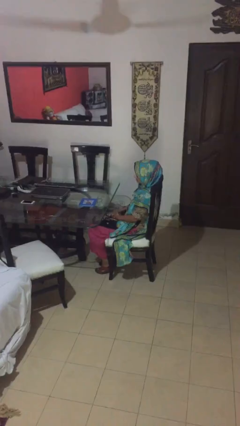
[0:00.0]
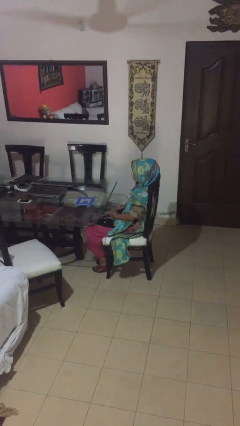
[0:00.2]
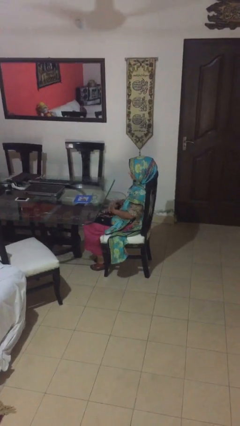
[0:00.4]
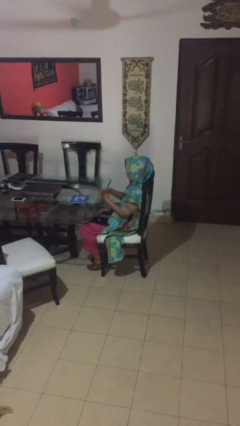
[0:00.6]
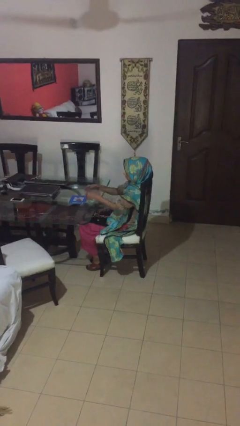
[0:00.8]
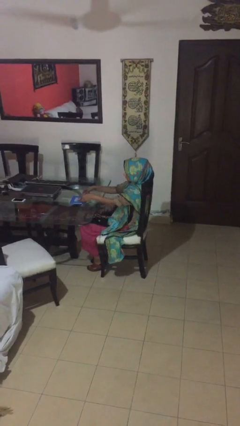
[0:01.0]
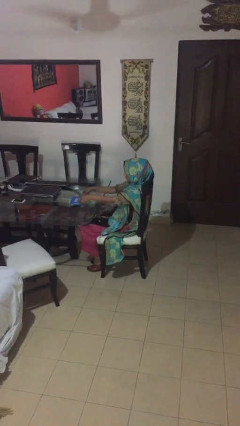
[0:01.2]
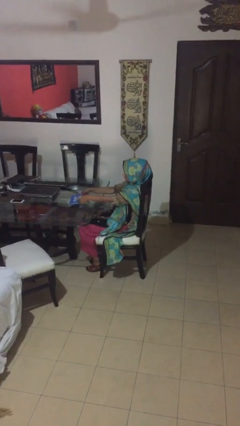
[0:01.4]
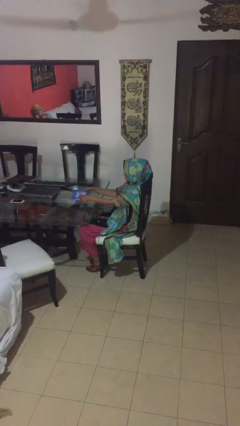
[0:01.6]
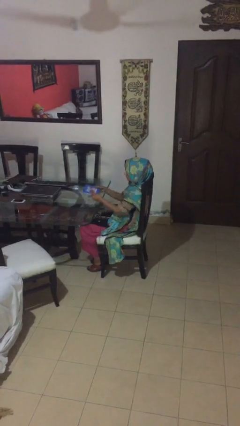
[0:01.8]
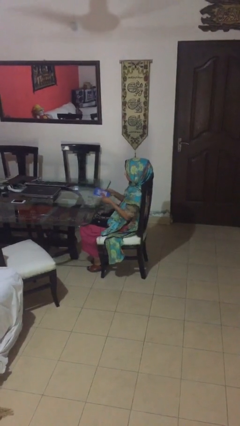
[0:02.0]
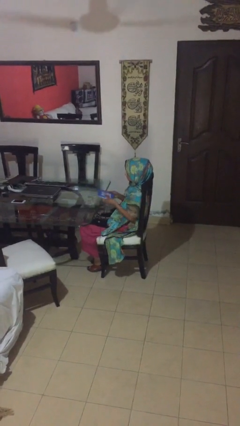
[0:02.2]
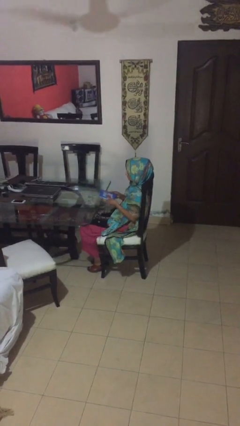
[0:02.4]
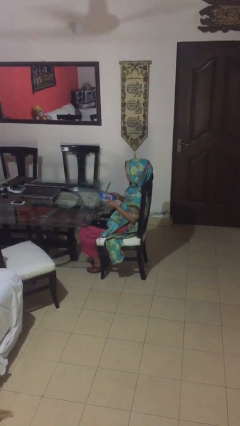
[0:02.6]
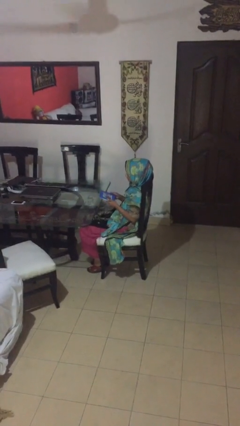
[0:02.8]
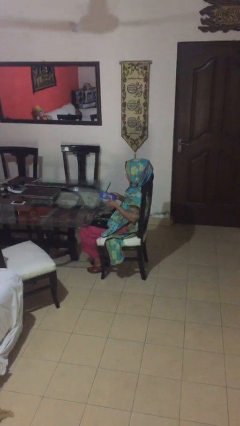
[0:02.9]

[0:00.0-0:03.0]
person picks up object from table

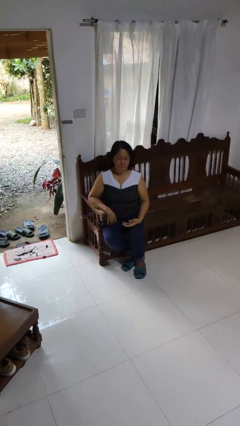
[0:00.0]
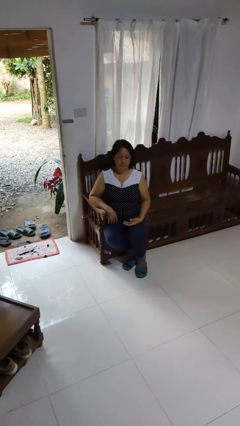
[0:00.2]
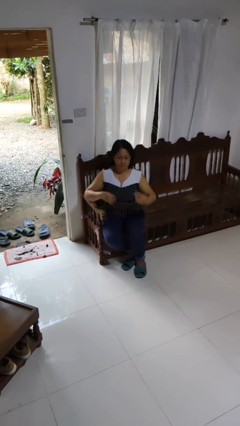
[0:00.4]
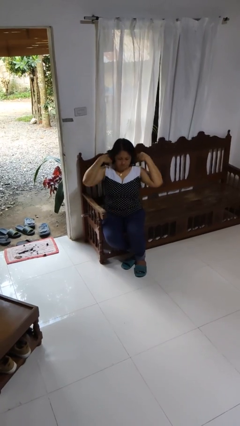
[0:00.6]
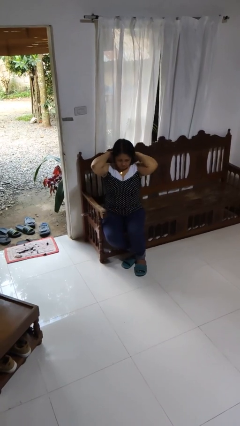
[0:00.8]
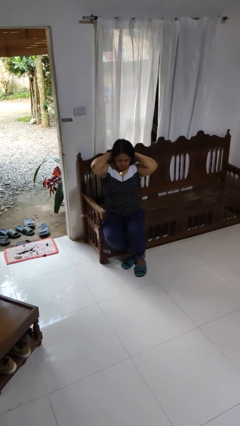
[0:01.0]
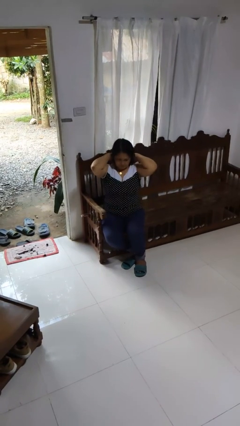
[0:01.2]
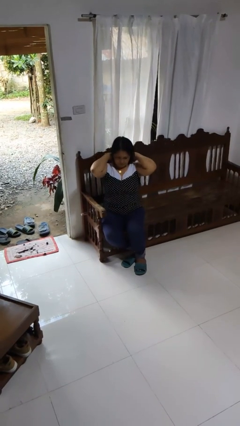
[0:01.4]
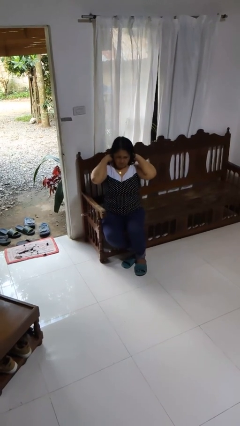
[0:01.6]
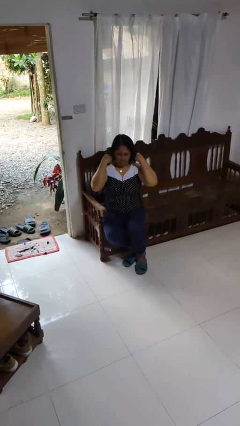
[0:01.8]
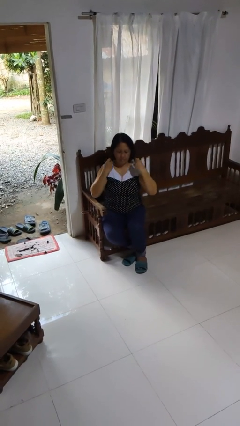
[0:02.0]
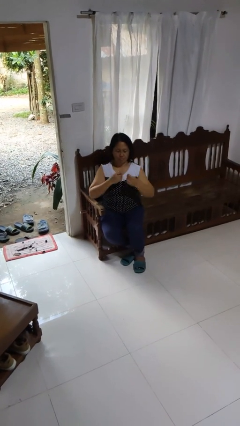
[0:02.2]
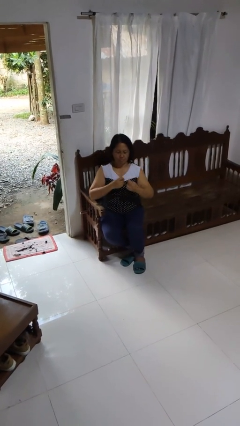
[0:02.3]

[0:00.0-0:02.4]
person takes off necklace

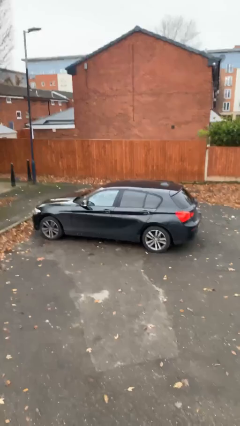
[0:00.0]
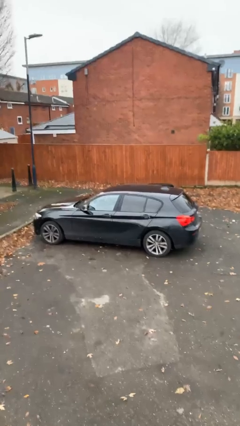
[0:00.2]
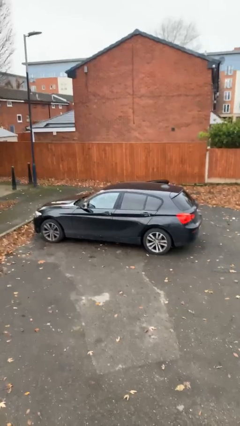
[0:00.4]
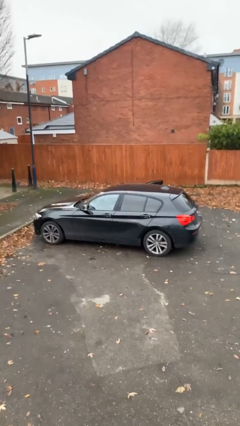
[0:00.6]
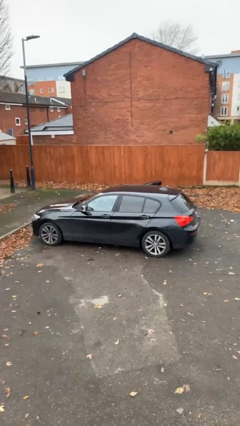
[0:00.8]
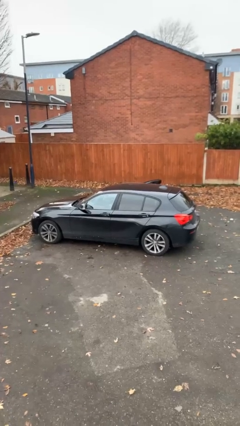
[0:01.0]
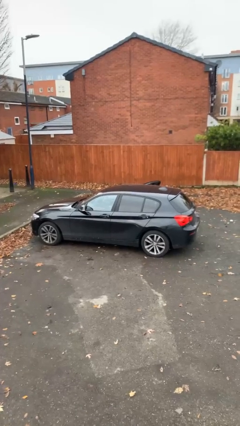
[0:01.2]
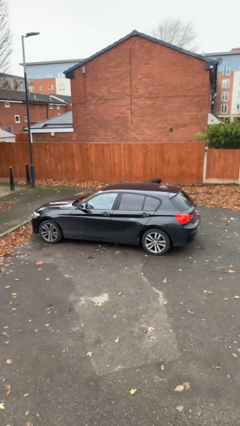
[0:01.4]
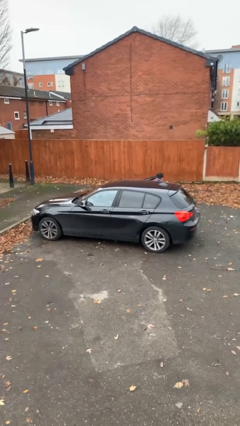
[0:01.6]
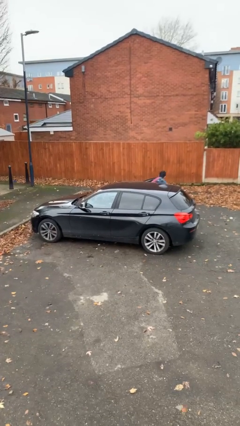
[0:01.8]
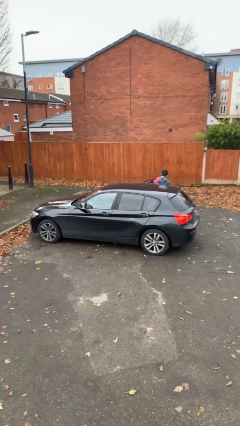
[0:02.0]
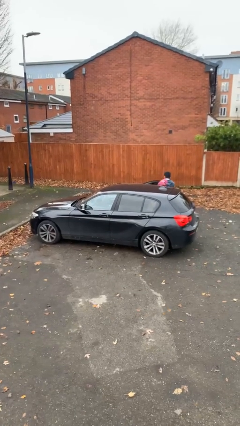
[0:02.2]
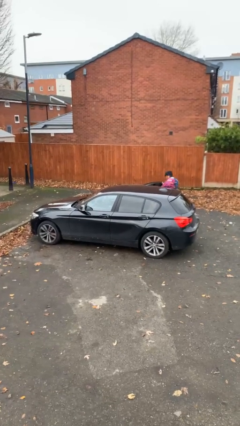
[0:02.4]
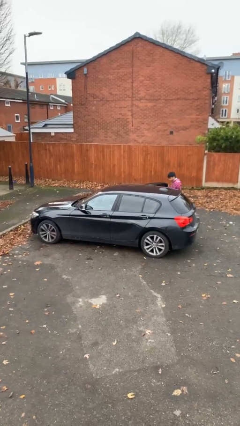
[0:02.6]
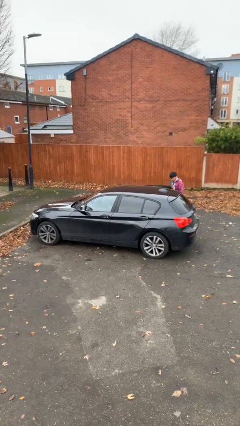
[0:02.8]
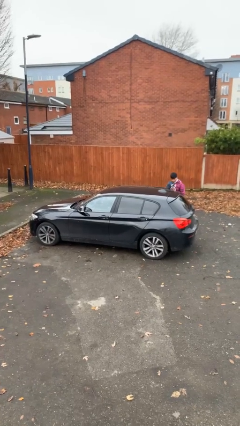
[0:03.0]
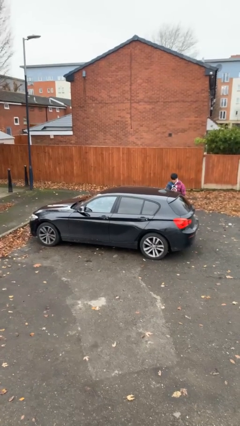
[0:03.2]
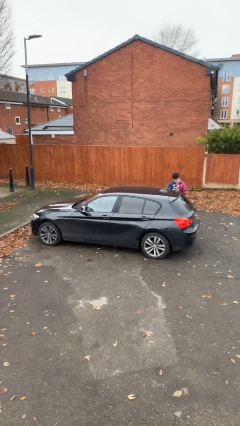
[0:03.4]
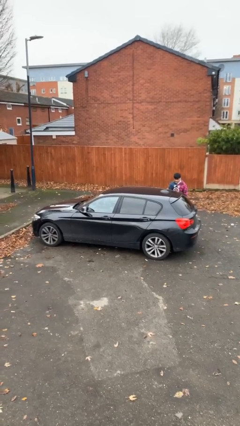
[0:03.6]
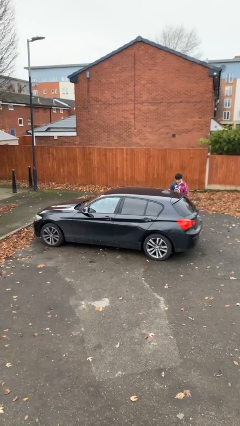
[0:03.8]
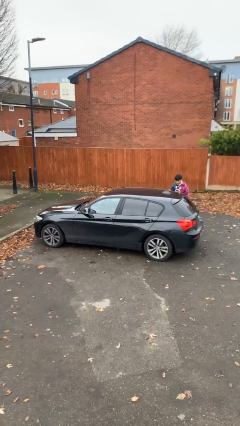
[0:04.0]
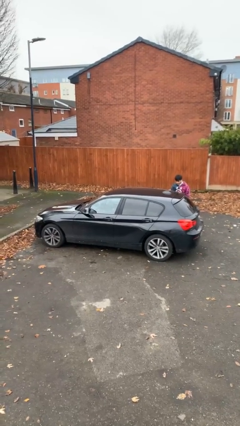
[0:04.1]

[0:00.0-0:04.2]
car drops off person

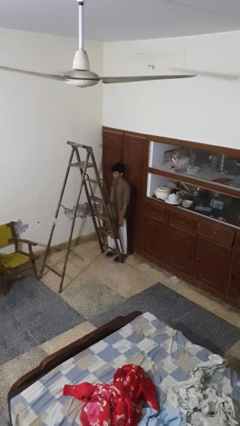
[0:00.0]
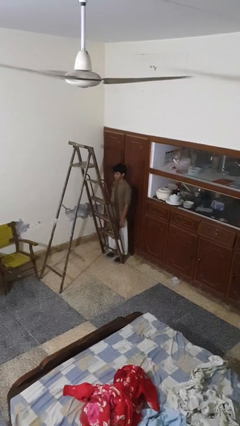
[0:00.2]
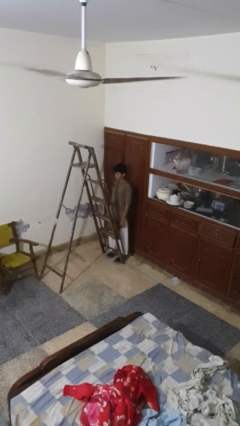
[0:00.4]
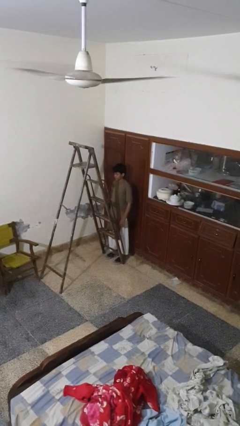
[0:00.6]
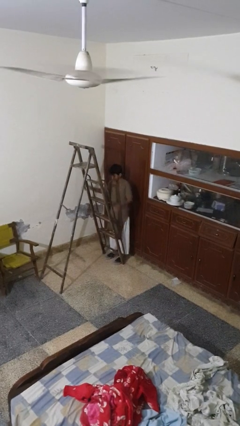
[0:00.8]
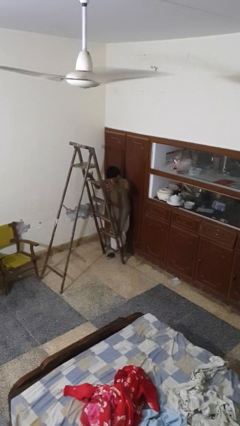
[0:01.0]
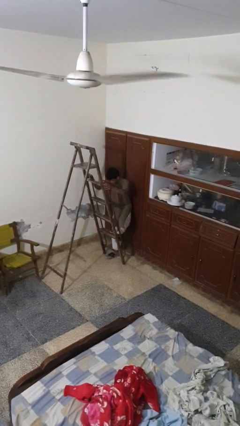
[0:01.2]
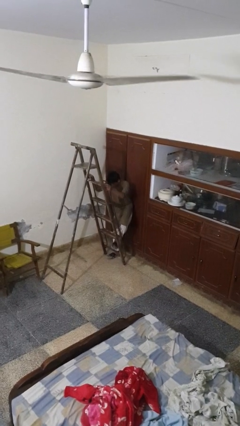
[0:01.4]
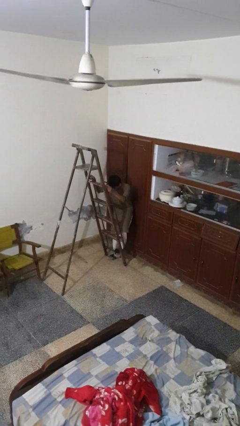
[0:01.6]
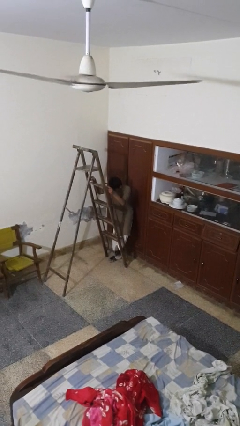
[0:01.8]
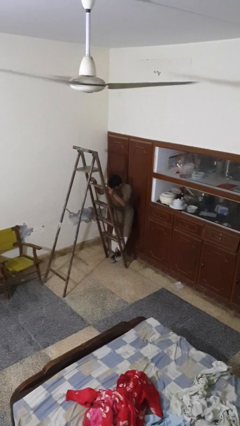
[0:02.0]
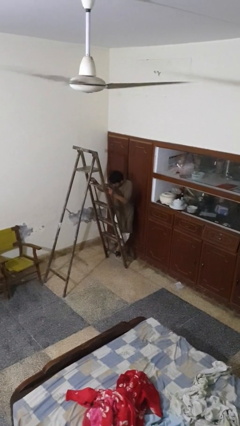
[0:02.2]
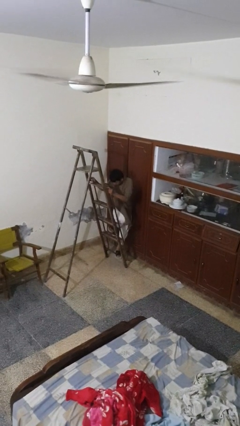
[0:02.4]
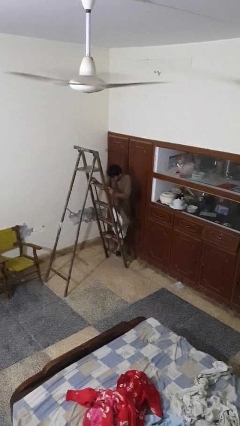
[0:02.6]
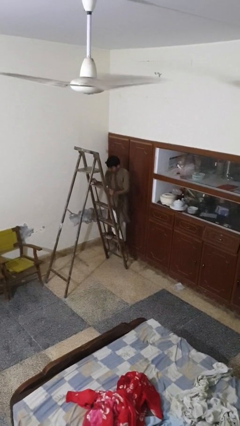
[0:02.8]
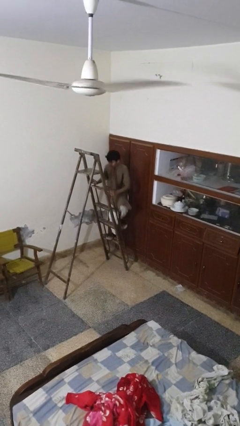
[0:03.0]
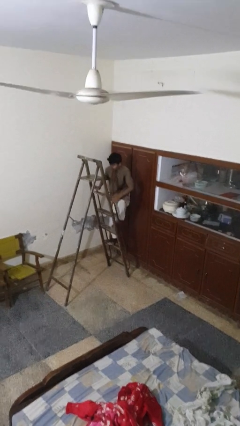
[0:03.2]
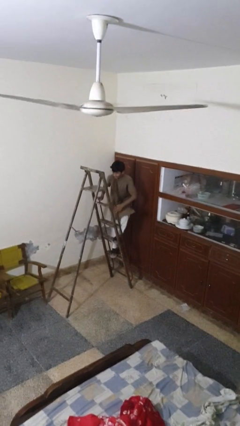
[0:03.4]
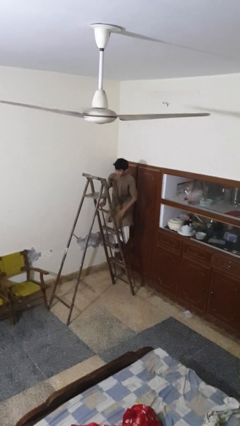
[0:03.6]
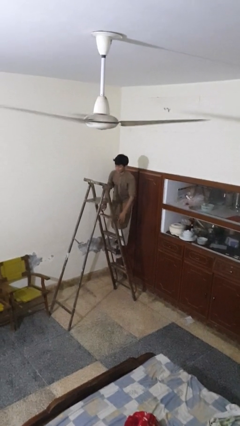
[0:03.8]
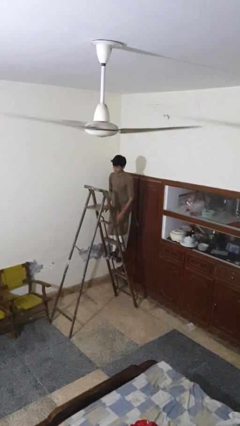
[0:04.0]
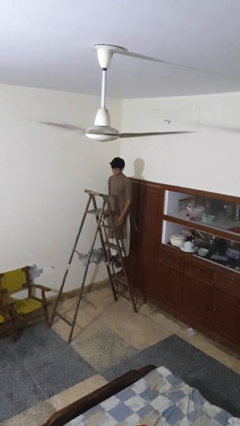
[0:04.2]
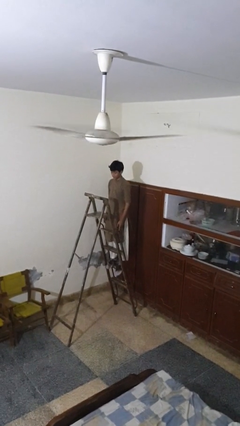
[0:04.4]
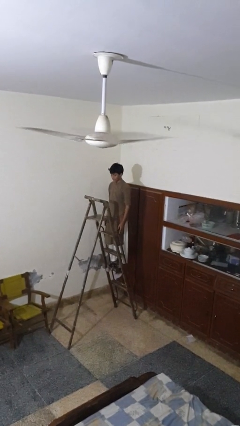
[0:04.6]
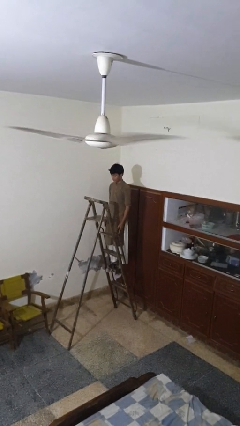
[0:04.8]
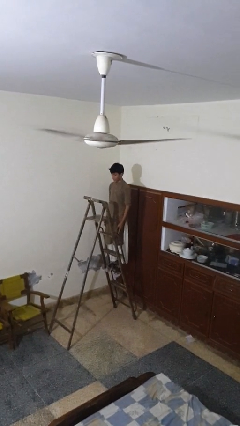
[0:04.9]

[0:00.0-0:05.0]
person climbs up ladder

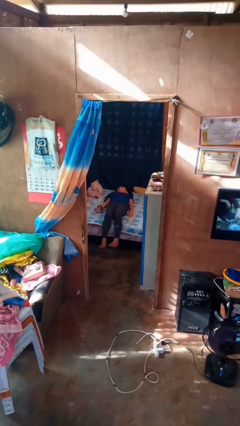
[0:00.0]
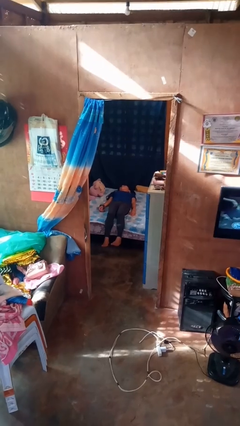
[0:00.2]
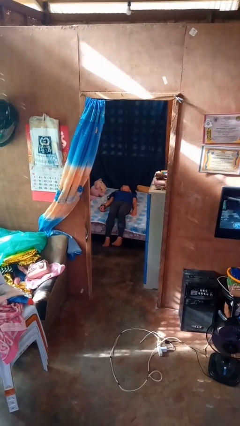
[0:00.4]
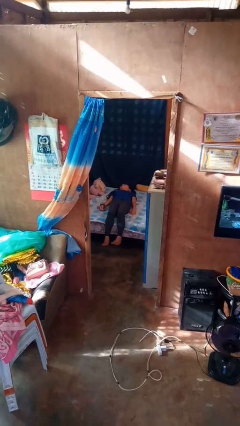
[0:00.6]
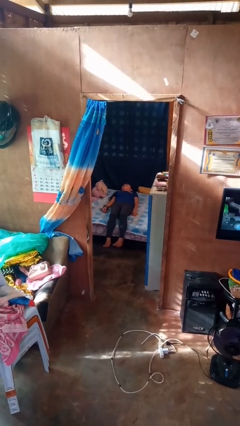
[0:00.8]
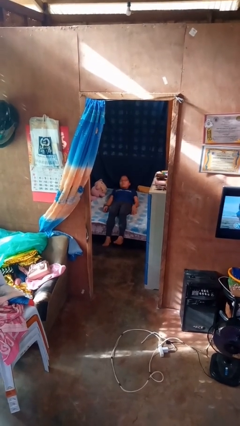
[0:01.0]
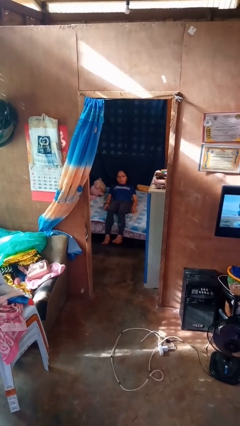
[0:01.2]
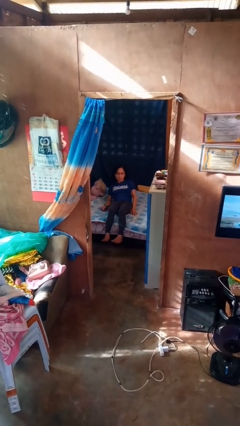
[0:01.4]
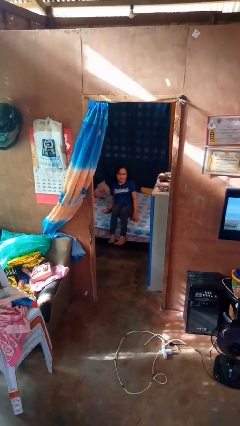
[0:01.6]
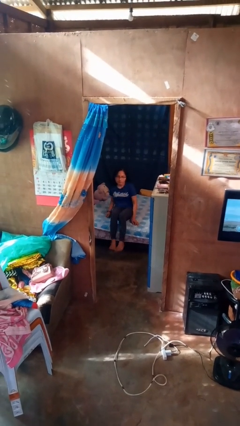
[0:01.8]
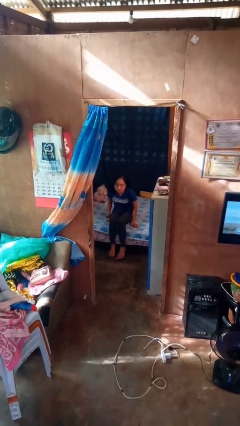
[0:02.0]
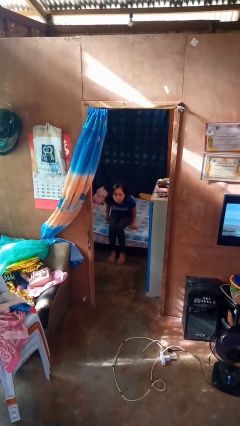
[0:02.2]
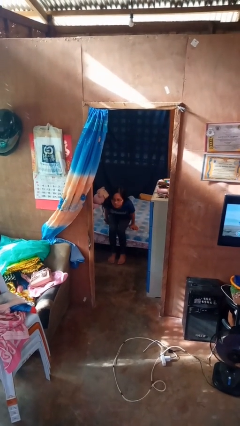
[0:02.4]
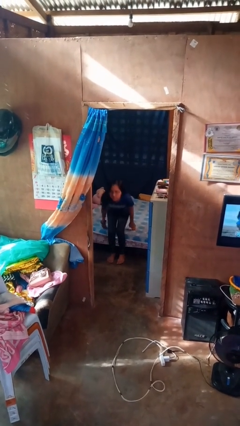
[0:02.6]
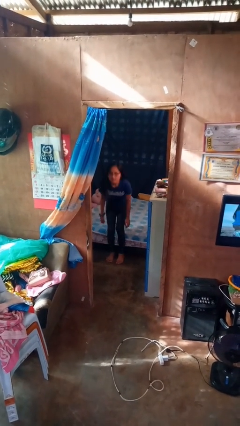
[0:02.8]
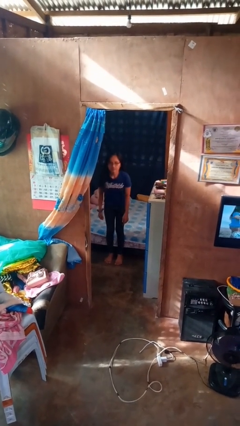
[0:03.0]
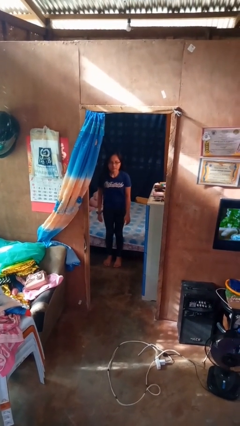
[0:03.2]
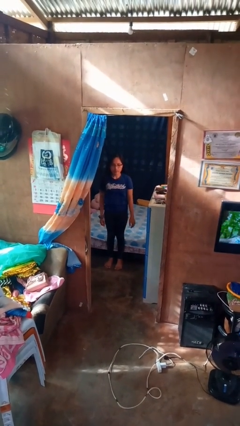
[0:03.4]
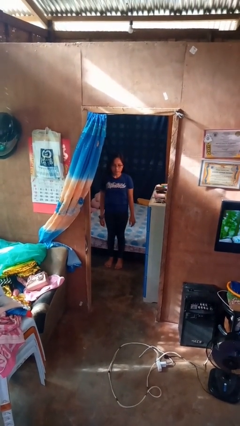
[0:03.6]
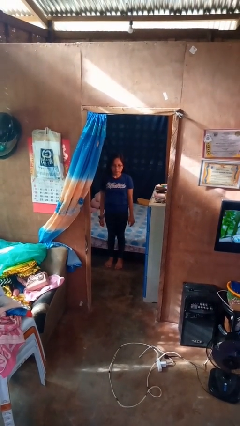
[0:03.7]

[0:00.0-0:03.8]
person stands up
